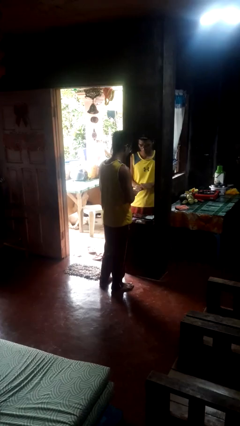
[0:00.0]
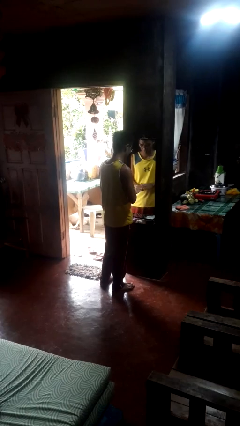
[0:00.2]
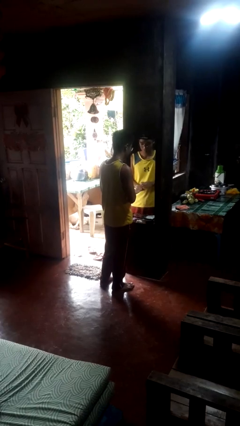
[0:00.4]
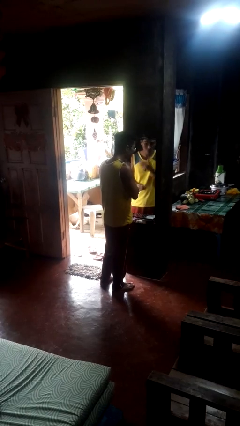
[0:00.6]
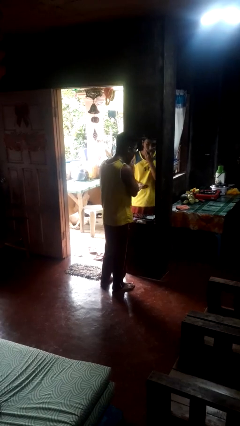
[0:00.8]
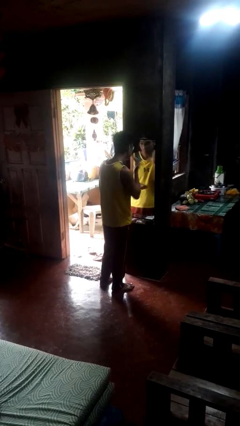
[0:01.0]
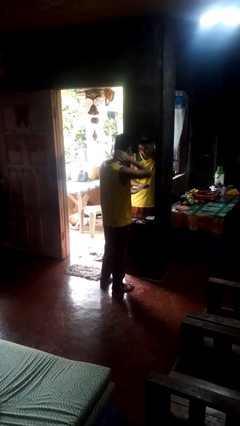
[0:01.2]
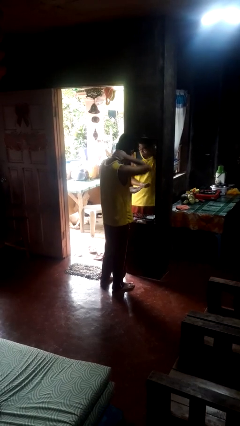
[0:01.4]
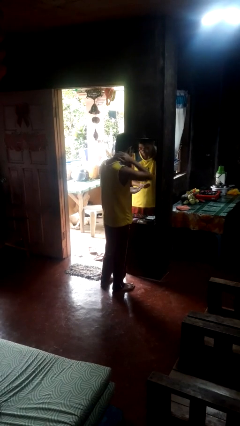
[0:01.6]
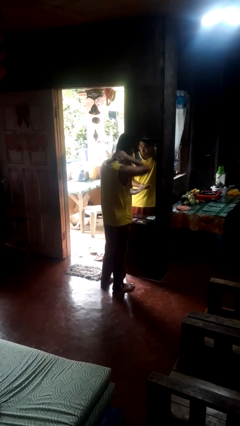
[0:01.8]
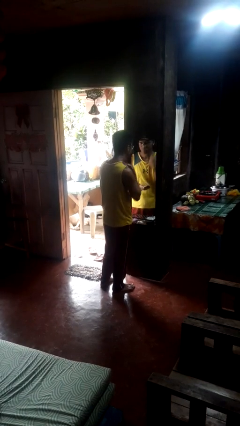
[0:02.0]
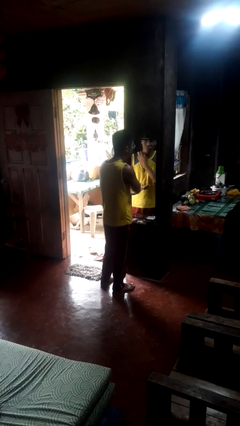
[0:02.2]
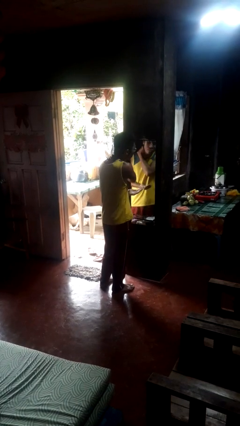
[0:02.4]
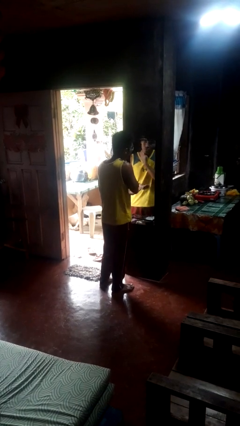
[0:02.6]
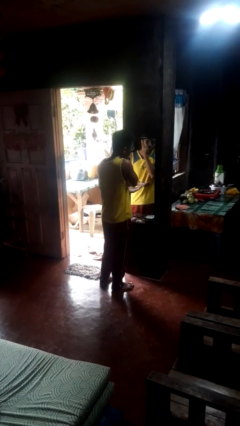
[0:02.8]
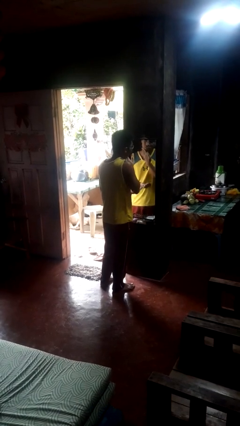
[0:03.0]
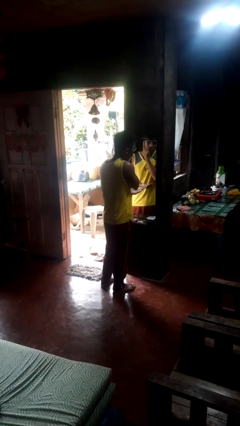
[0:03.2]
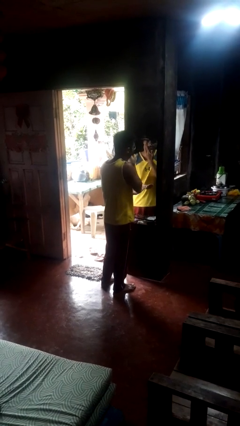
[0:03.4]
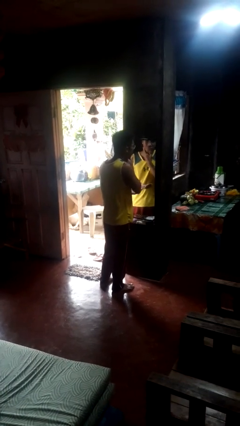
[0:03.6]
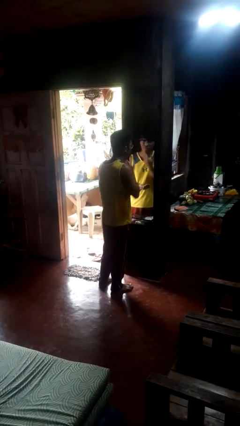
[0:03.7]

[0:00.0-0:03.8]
person applies foundation makeup

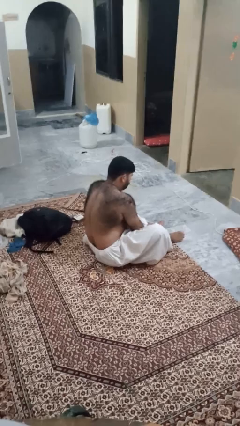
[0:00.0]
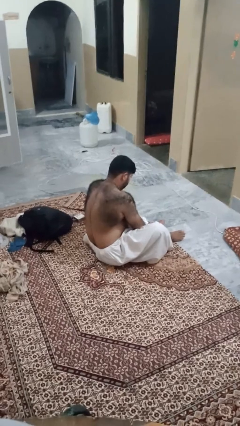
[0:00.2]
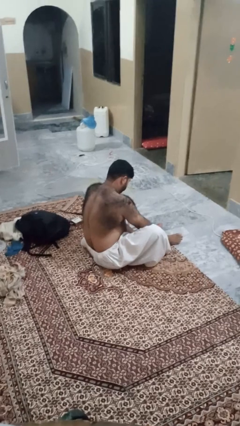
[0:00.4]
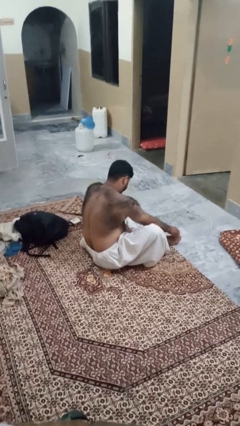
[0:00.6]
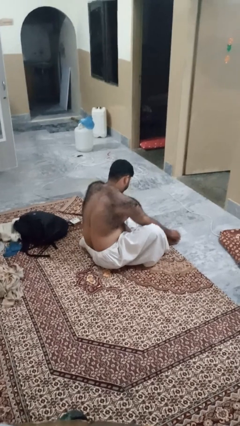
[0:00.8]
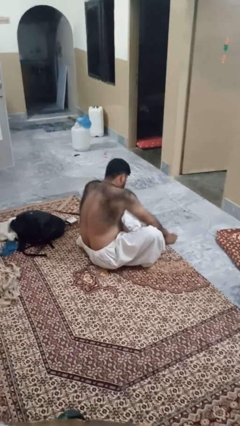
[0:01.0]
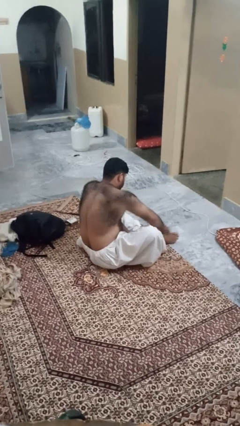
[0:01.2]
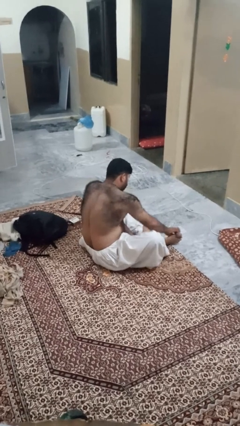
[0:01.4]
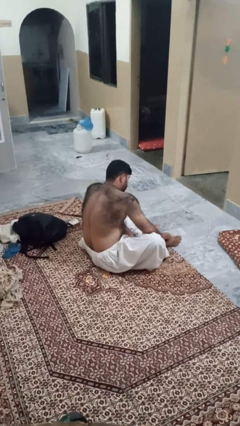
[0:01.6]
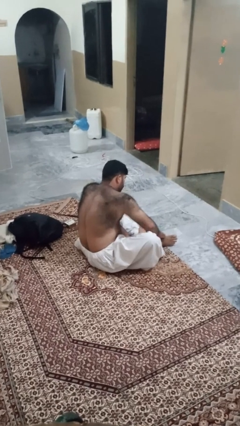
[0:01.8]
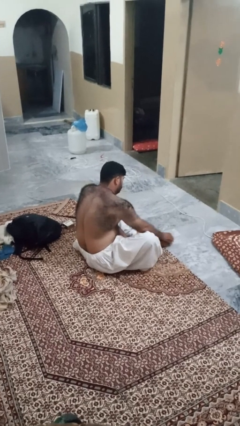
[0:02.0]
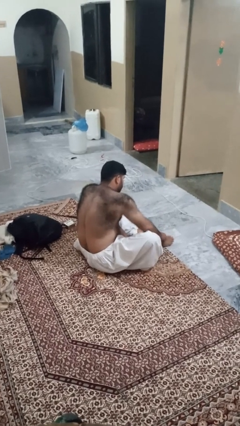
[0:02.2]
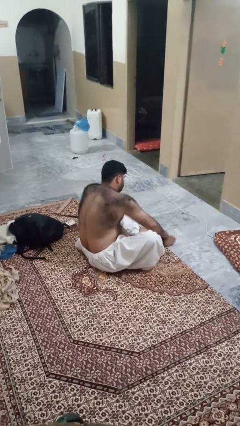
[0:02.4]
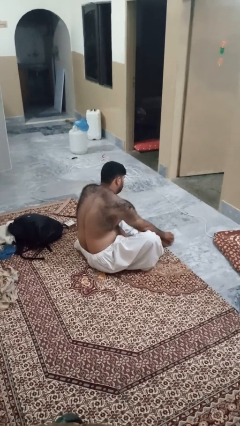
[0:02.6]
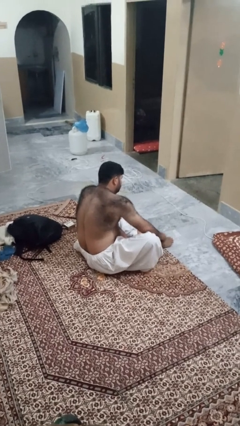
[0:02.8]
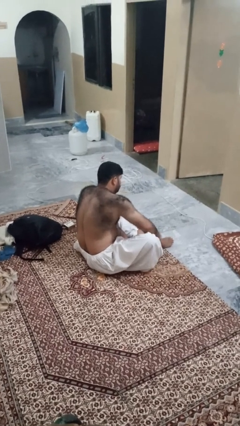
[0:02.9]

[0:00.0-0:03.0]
person rubs foot

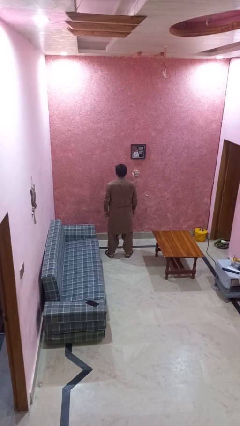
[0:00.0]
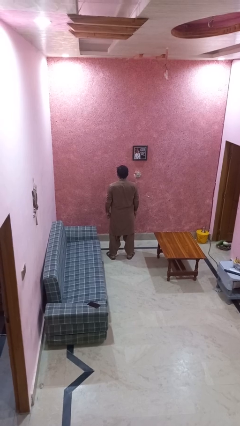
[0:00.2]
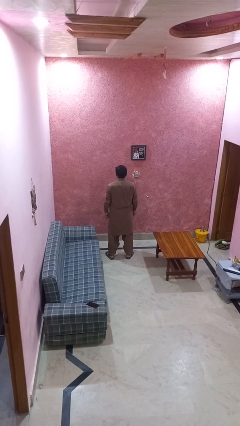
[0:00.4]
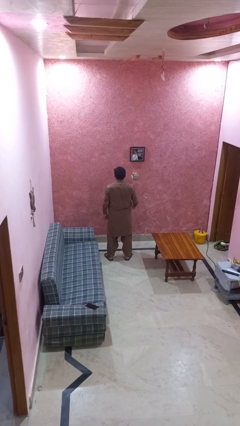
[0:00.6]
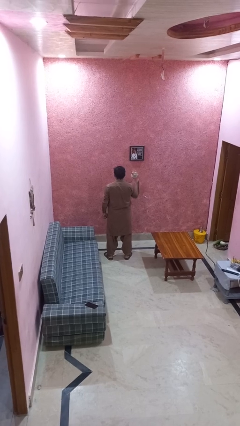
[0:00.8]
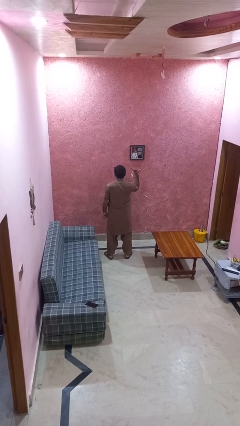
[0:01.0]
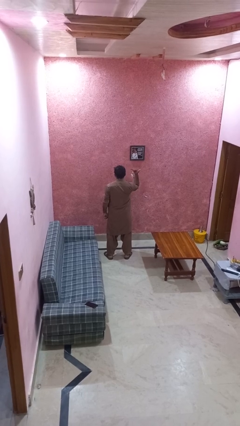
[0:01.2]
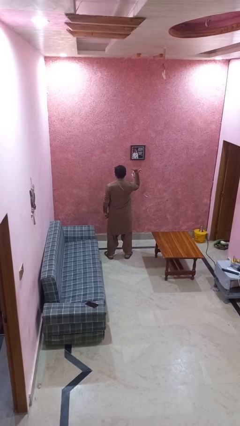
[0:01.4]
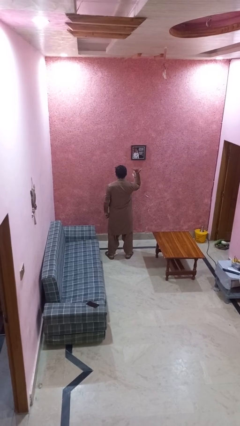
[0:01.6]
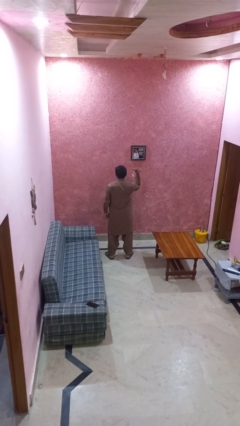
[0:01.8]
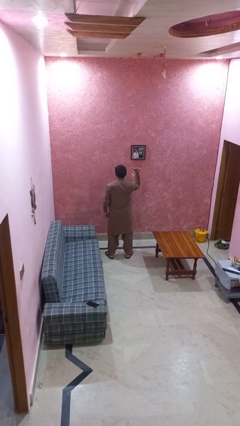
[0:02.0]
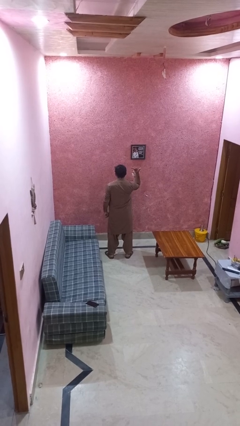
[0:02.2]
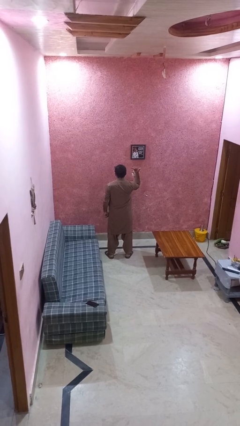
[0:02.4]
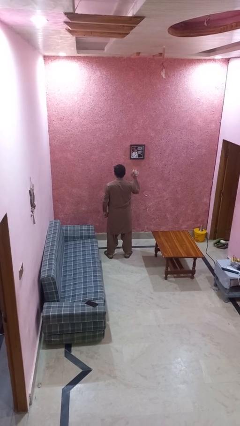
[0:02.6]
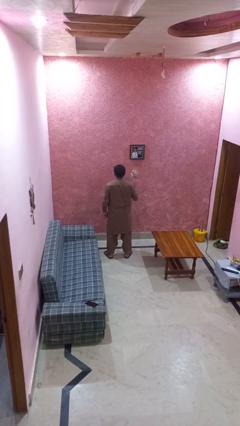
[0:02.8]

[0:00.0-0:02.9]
person gestures hang loose

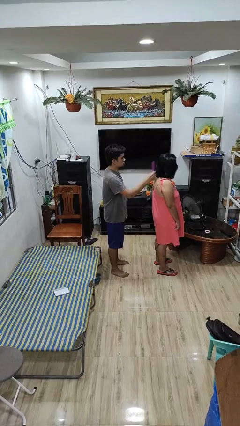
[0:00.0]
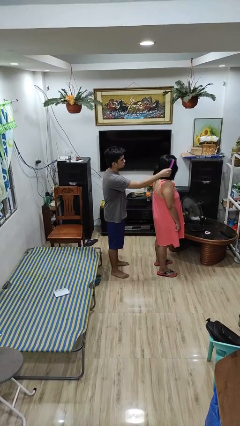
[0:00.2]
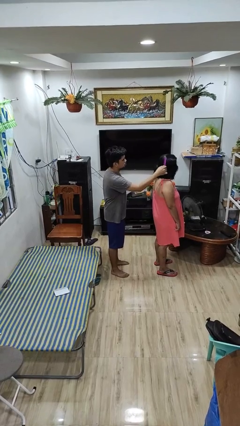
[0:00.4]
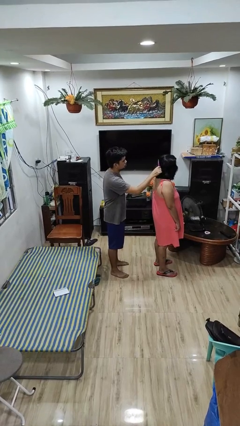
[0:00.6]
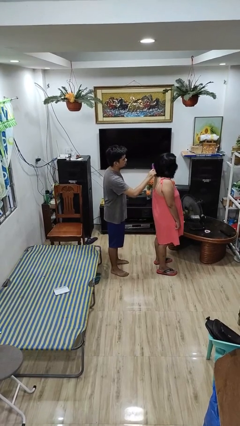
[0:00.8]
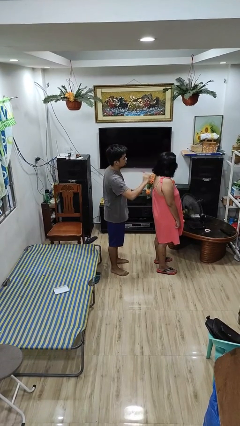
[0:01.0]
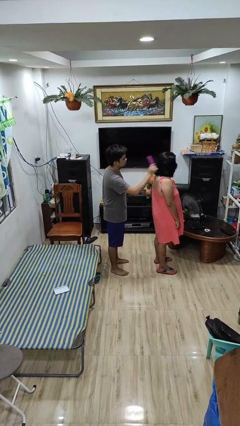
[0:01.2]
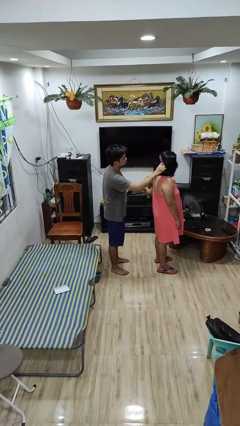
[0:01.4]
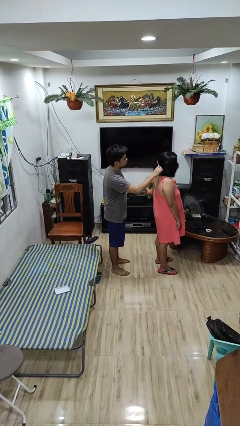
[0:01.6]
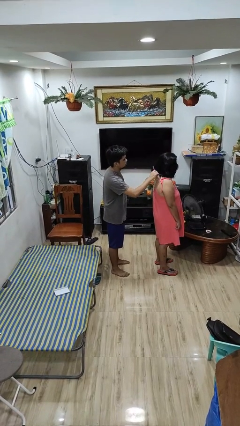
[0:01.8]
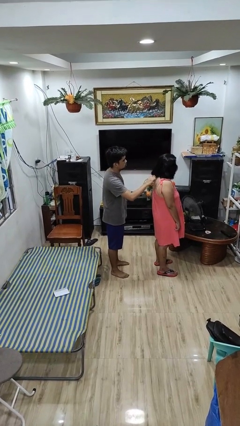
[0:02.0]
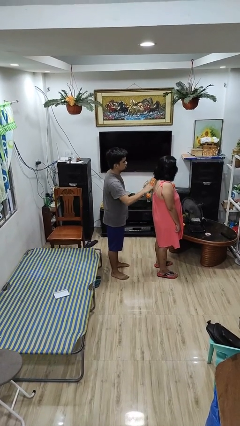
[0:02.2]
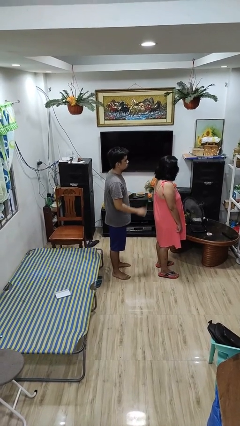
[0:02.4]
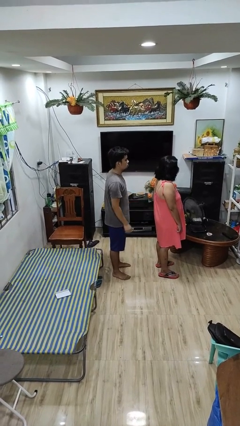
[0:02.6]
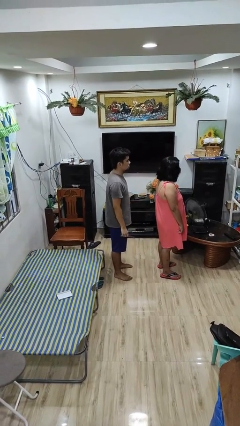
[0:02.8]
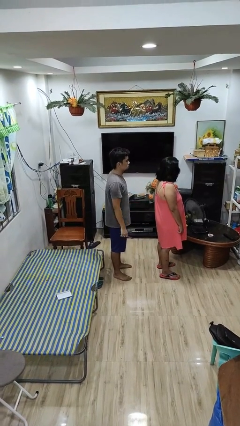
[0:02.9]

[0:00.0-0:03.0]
person brushes hair of person

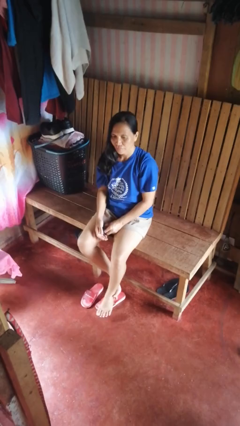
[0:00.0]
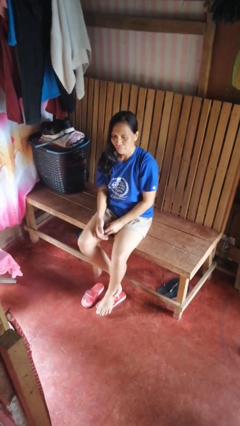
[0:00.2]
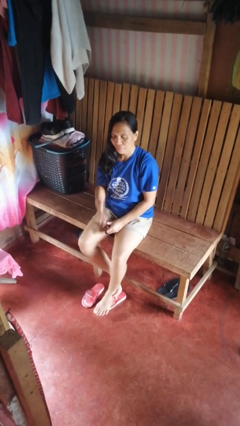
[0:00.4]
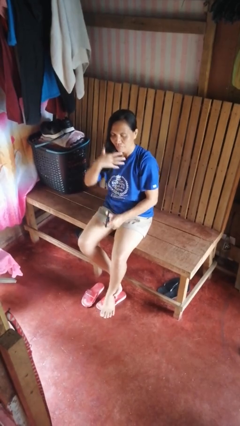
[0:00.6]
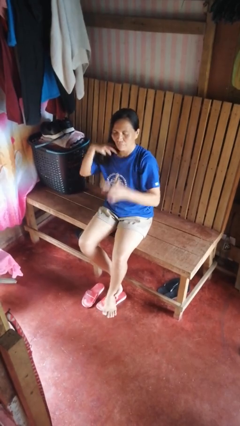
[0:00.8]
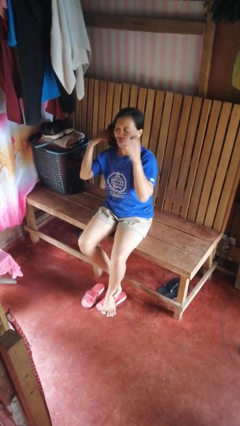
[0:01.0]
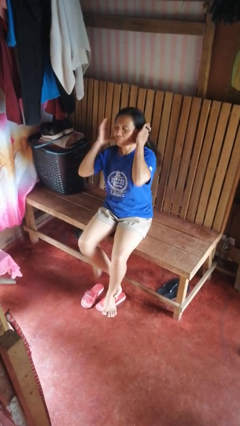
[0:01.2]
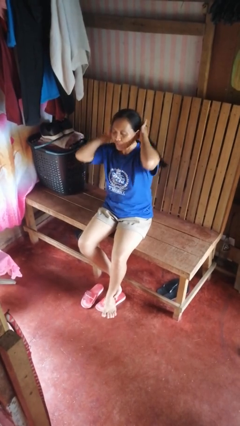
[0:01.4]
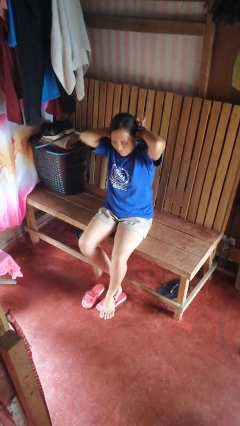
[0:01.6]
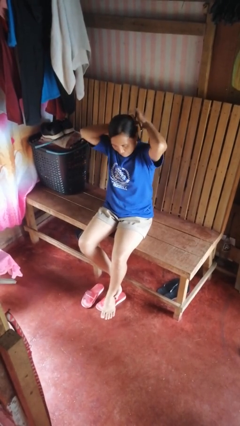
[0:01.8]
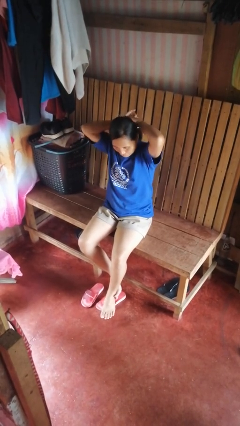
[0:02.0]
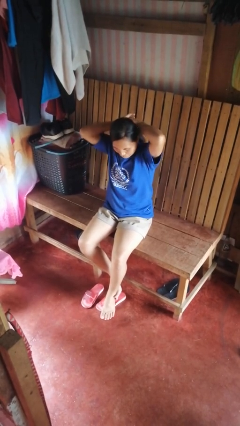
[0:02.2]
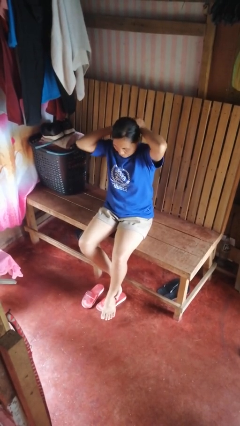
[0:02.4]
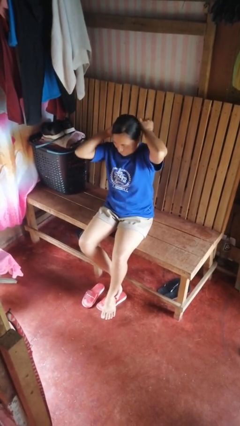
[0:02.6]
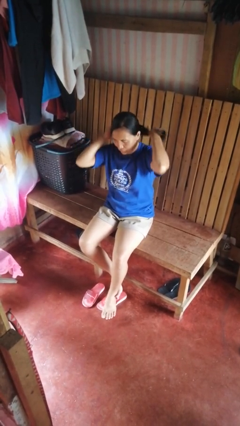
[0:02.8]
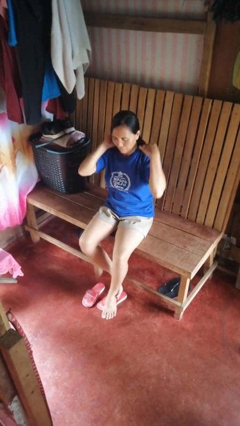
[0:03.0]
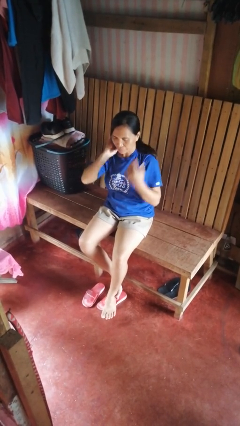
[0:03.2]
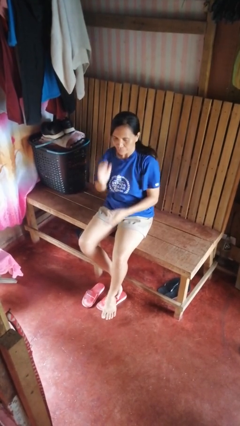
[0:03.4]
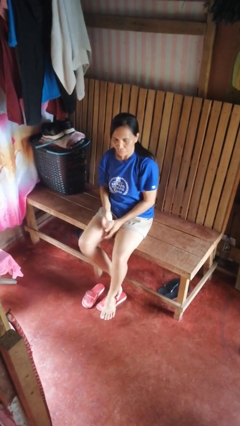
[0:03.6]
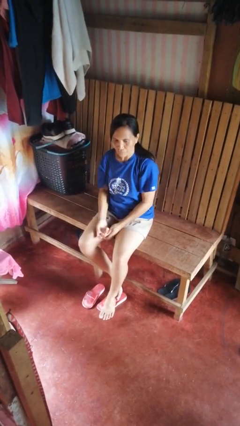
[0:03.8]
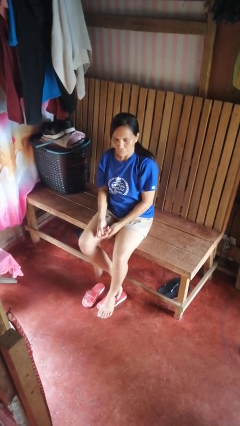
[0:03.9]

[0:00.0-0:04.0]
person puts hair in ponytail

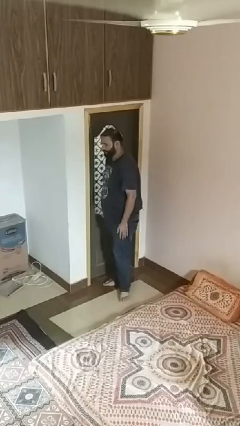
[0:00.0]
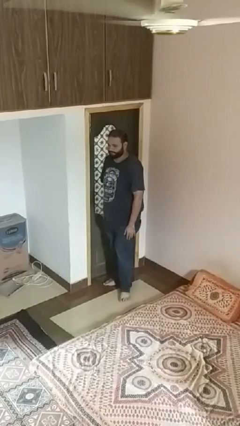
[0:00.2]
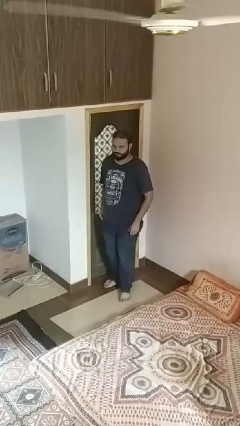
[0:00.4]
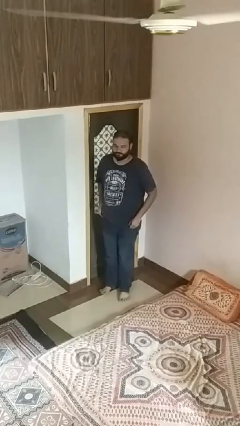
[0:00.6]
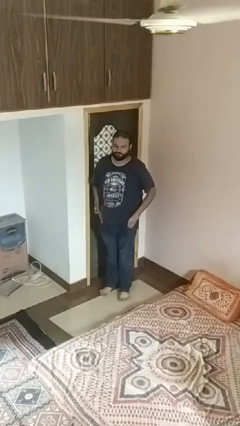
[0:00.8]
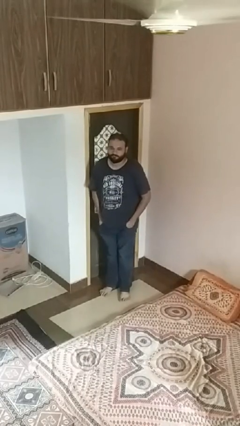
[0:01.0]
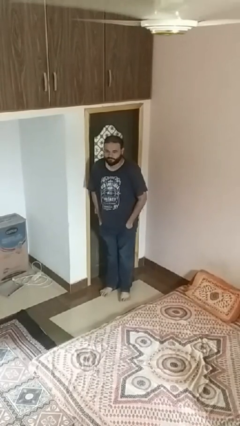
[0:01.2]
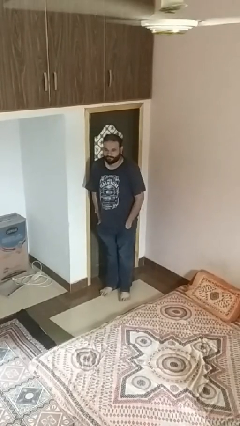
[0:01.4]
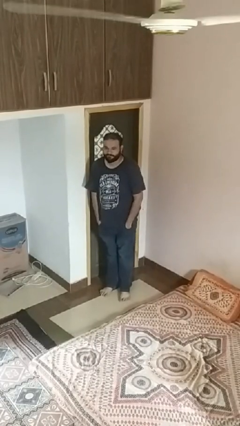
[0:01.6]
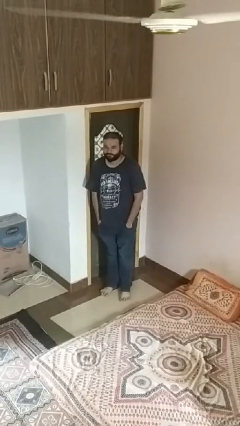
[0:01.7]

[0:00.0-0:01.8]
person puts hands in back pockets
